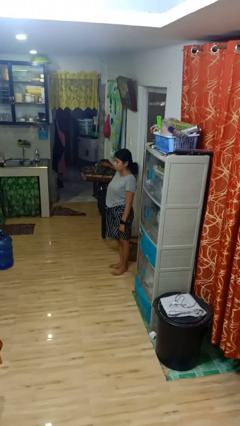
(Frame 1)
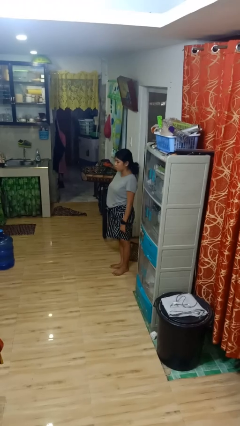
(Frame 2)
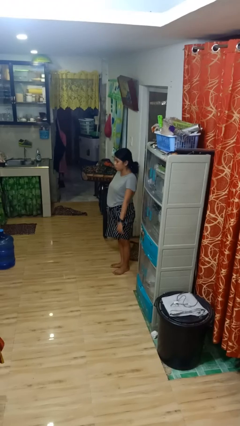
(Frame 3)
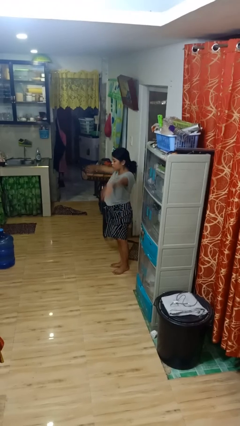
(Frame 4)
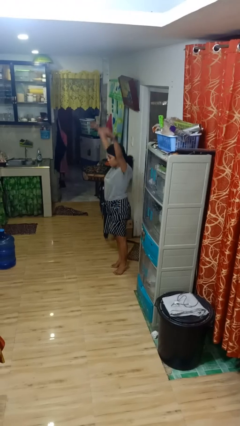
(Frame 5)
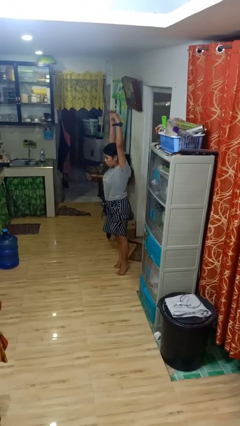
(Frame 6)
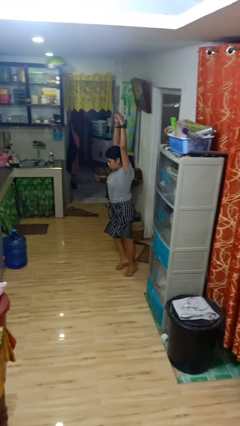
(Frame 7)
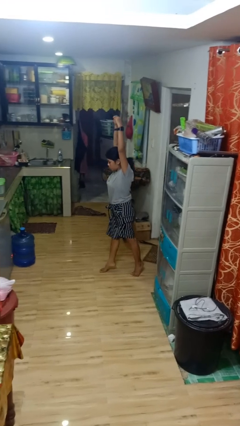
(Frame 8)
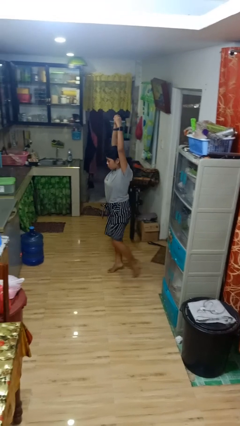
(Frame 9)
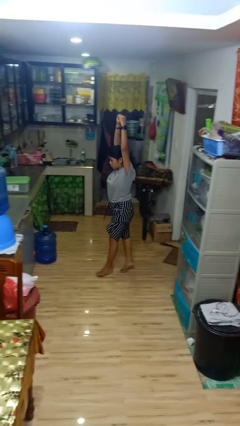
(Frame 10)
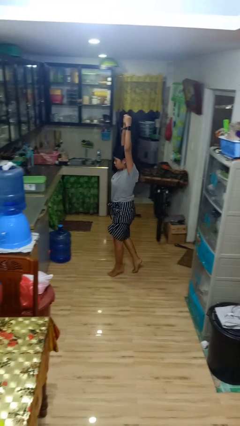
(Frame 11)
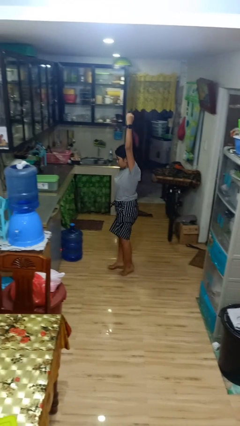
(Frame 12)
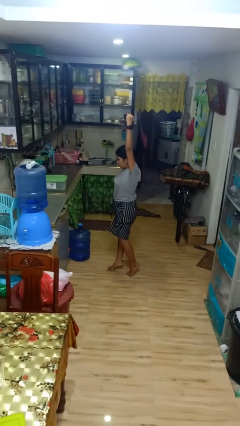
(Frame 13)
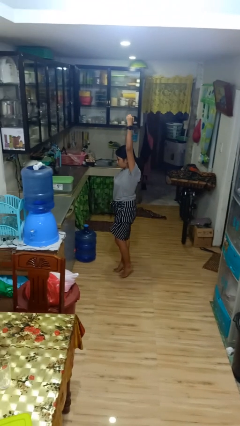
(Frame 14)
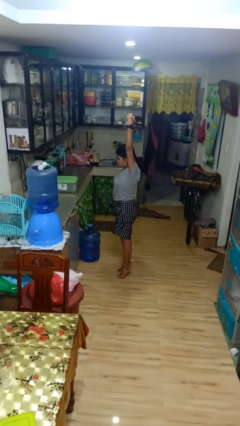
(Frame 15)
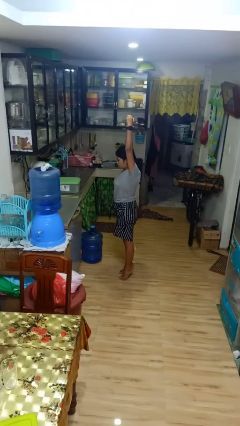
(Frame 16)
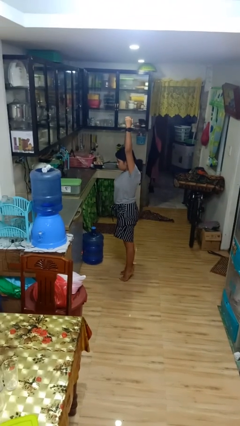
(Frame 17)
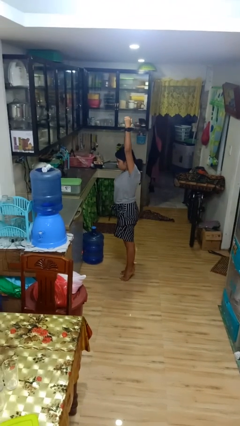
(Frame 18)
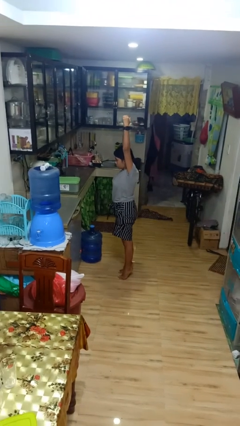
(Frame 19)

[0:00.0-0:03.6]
person walks tiptoe

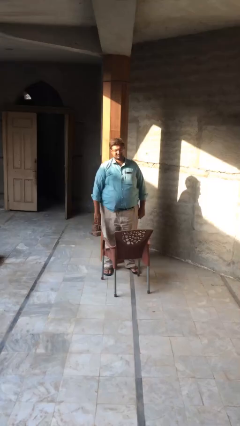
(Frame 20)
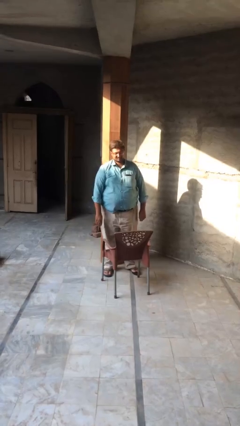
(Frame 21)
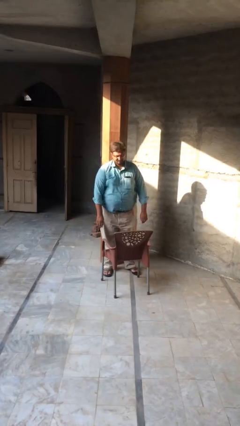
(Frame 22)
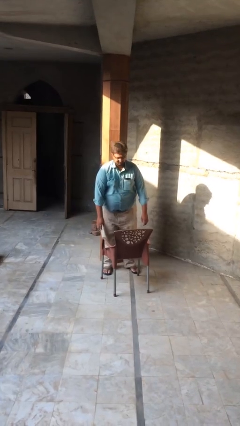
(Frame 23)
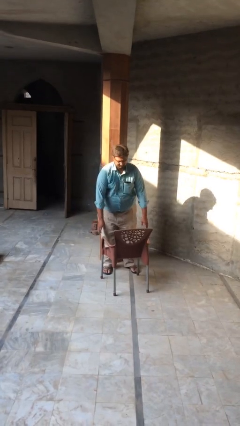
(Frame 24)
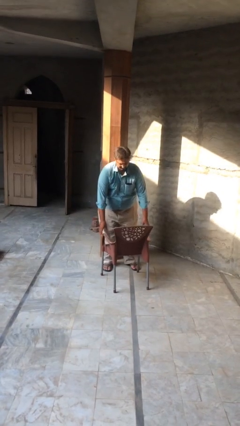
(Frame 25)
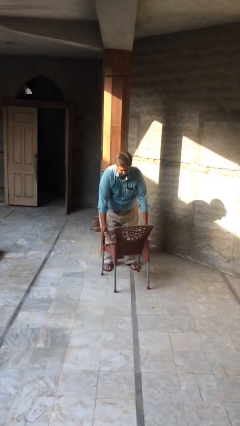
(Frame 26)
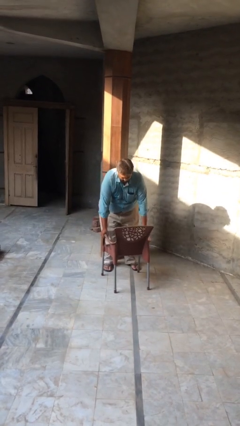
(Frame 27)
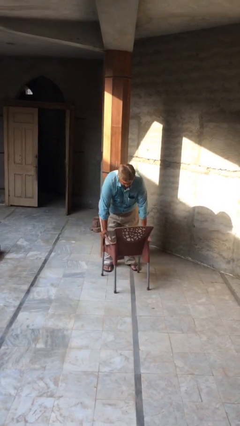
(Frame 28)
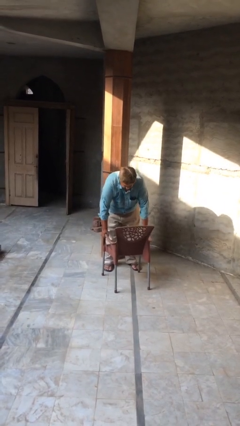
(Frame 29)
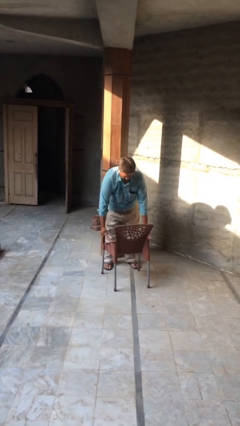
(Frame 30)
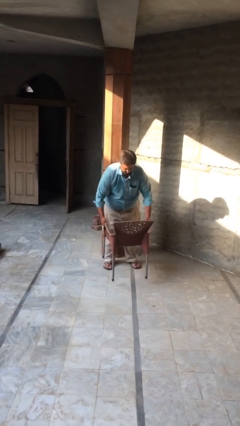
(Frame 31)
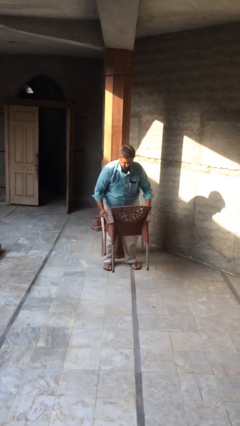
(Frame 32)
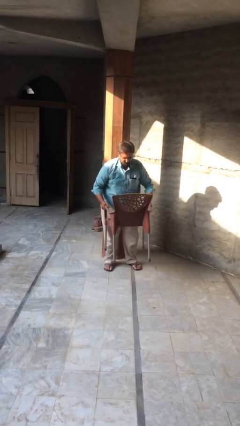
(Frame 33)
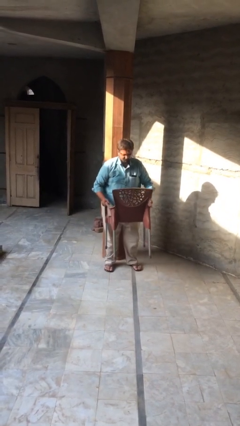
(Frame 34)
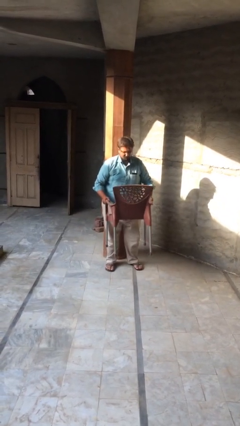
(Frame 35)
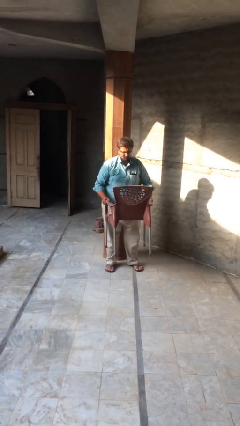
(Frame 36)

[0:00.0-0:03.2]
person picks up object from floor

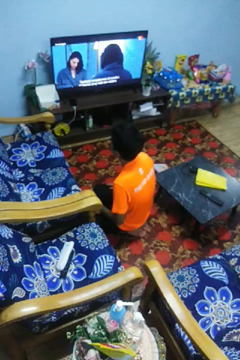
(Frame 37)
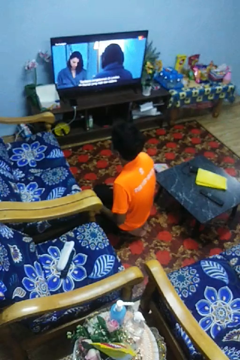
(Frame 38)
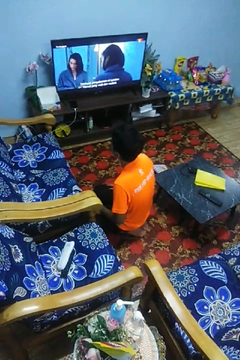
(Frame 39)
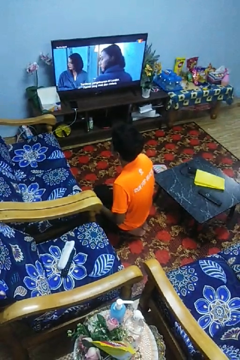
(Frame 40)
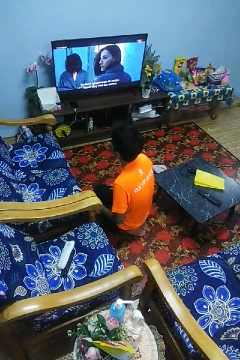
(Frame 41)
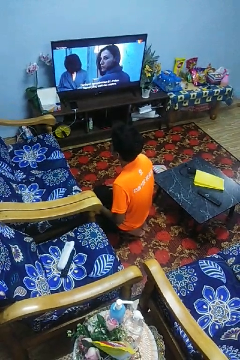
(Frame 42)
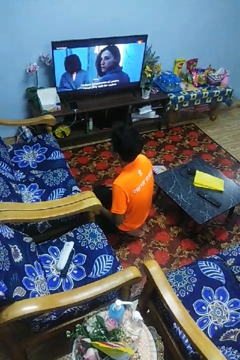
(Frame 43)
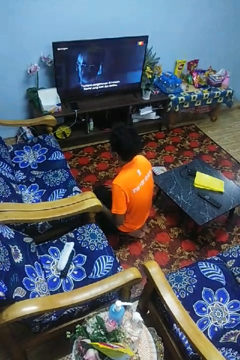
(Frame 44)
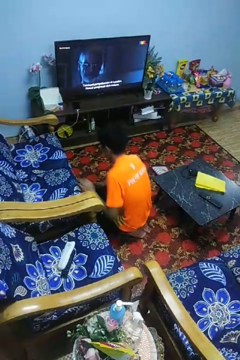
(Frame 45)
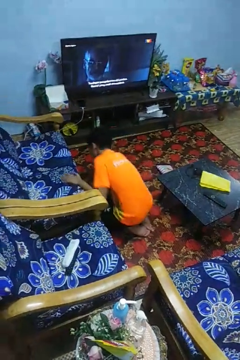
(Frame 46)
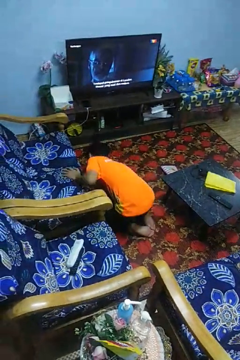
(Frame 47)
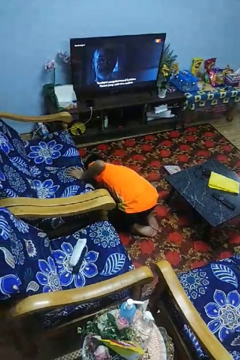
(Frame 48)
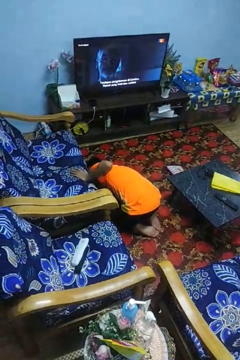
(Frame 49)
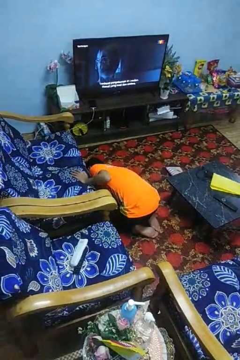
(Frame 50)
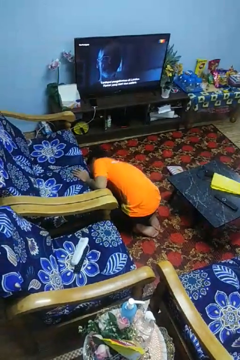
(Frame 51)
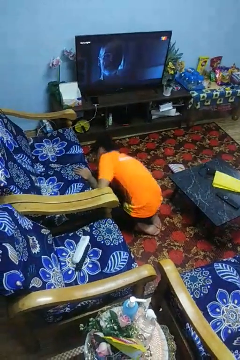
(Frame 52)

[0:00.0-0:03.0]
person searches under couch

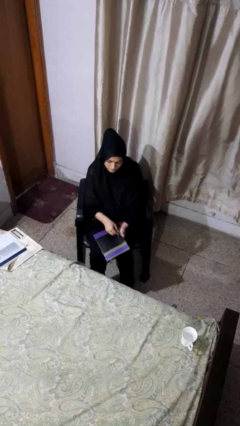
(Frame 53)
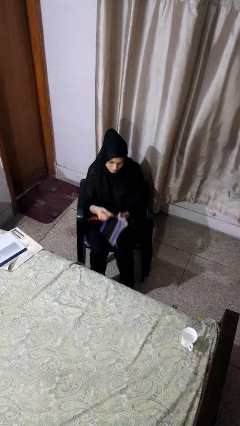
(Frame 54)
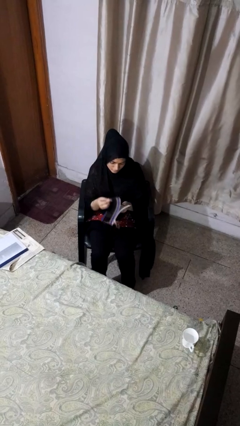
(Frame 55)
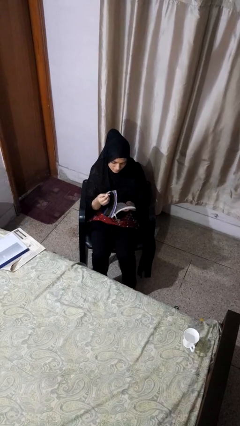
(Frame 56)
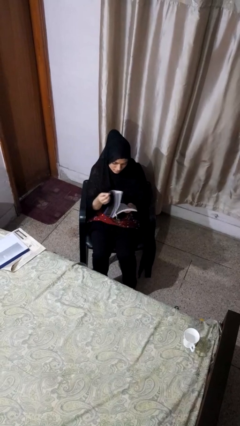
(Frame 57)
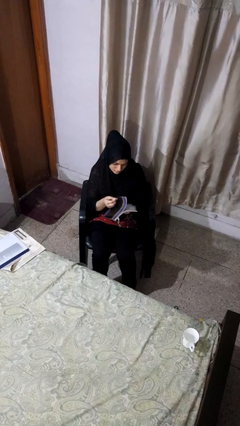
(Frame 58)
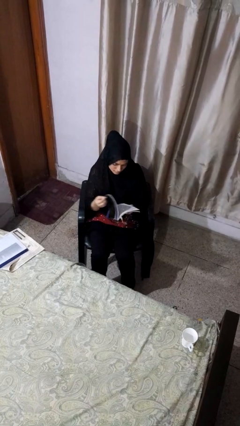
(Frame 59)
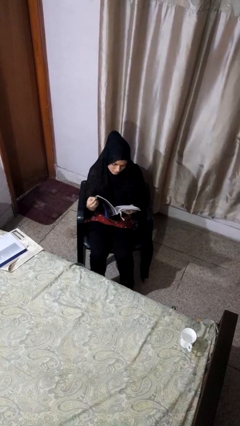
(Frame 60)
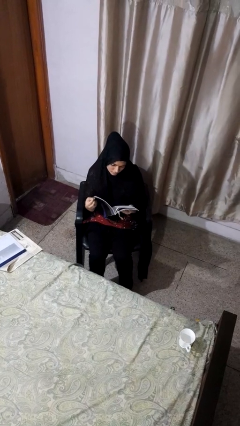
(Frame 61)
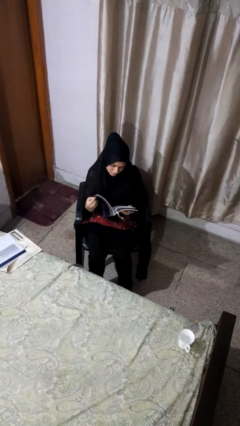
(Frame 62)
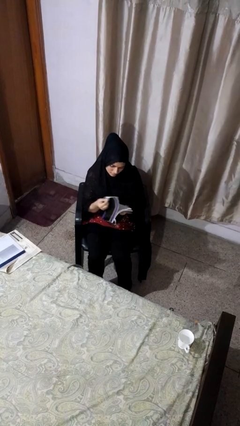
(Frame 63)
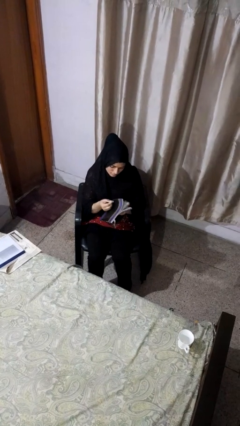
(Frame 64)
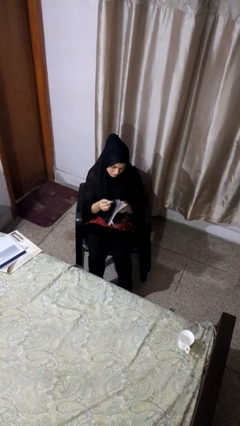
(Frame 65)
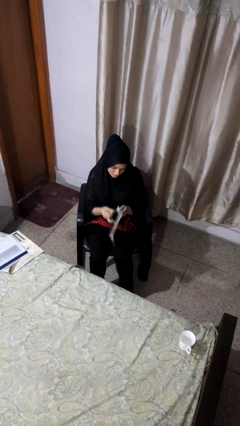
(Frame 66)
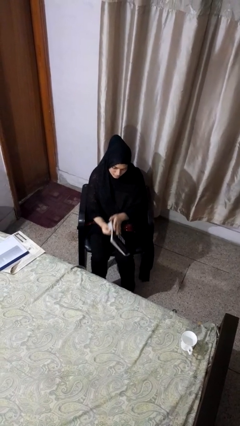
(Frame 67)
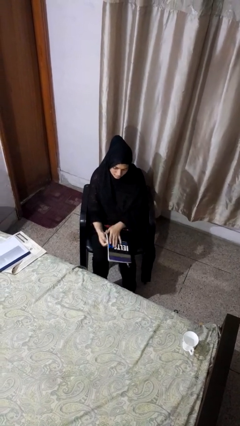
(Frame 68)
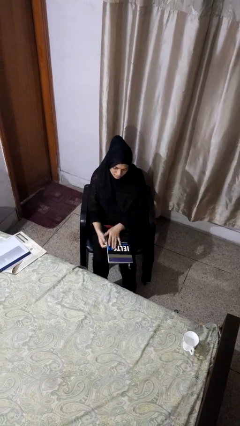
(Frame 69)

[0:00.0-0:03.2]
person reads book

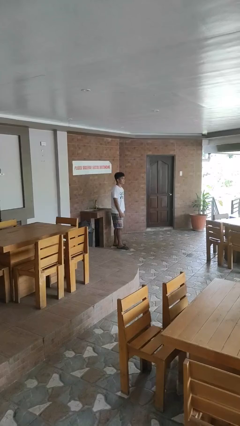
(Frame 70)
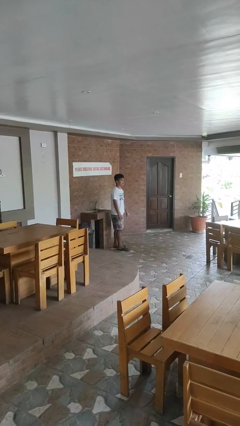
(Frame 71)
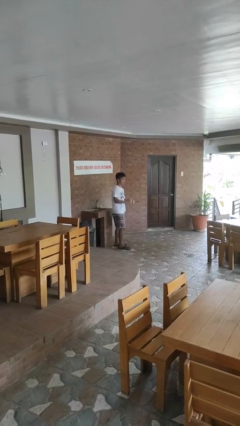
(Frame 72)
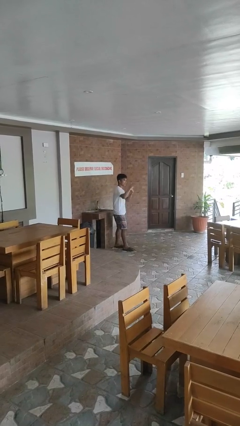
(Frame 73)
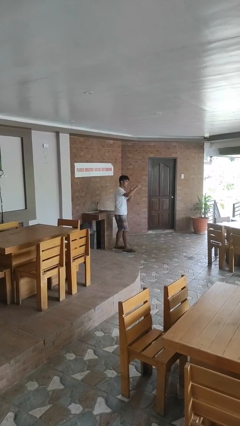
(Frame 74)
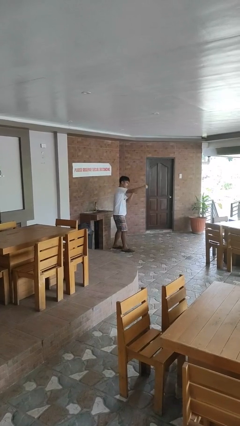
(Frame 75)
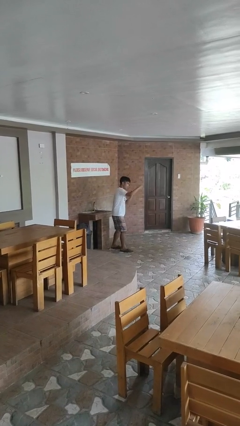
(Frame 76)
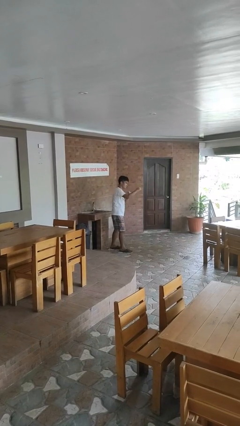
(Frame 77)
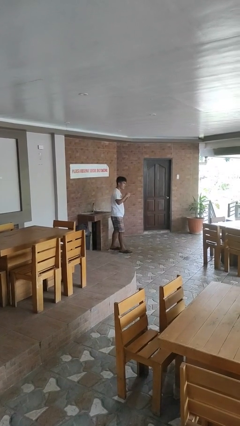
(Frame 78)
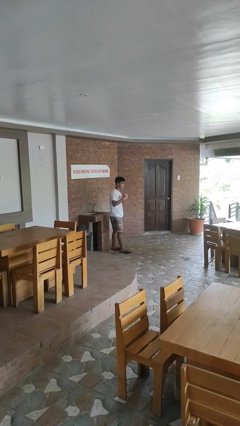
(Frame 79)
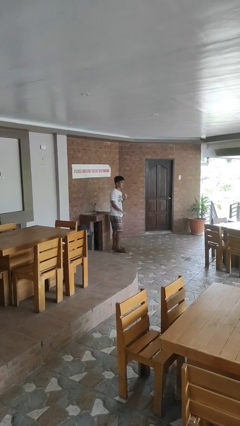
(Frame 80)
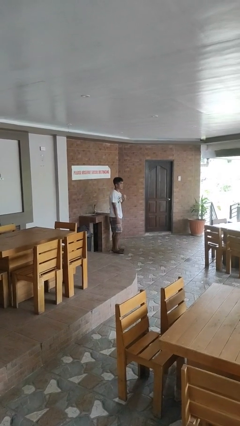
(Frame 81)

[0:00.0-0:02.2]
person punches

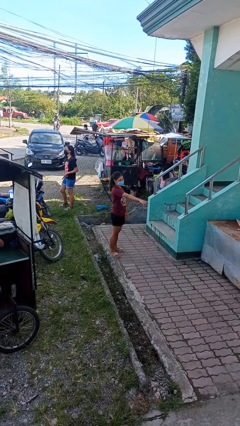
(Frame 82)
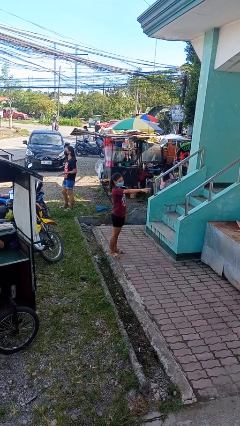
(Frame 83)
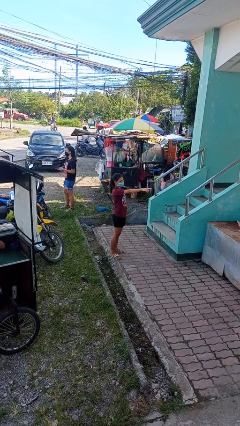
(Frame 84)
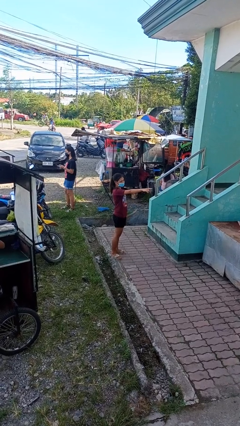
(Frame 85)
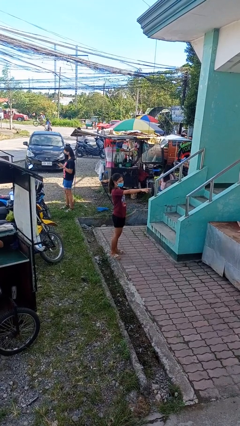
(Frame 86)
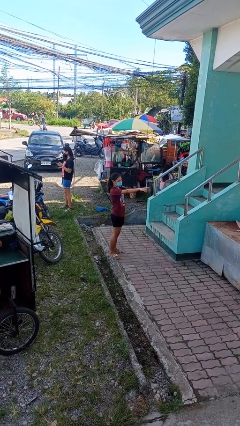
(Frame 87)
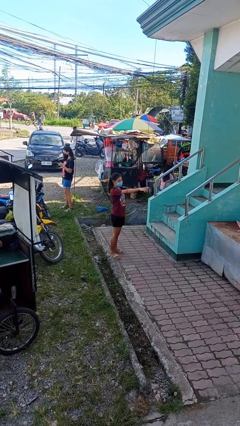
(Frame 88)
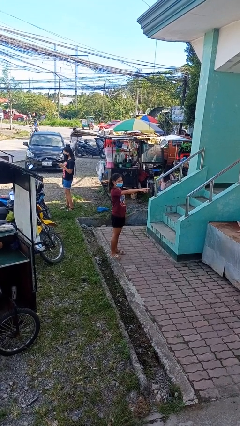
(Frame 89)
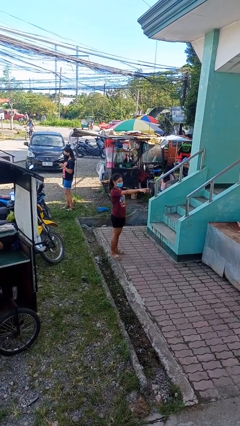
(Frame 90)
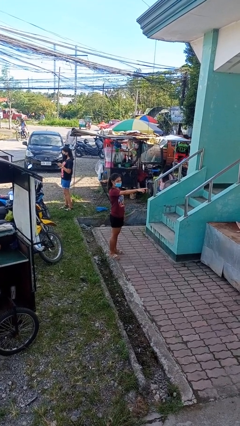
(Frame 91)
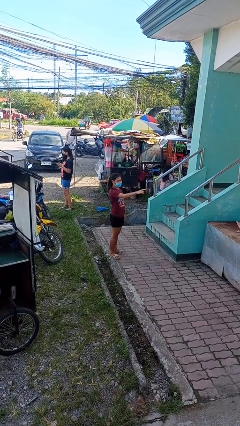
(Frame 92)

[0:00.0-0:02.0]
person points at person

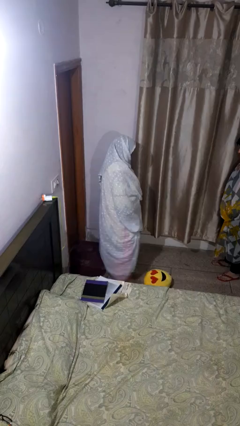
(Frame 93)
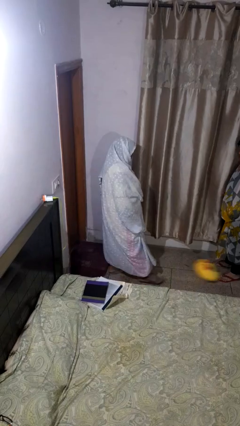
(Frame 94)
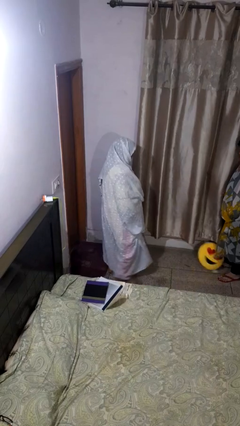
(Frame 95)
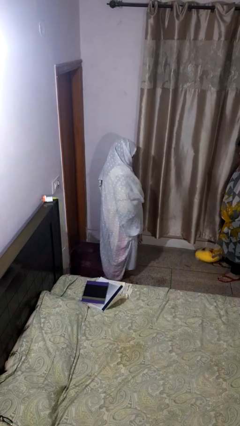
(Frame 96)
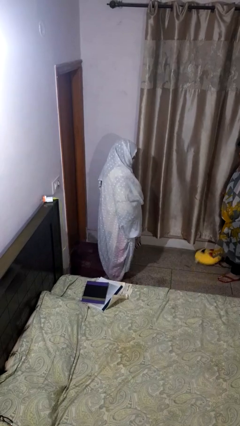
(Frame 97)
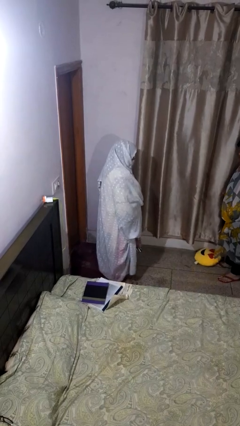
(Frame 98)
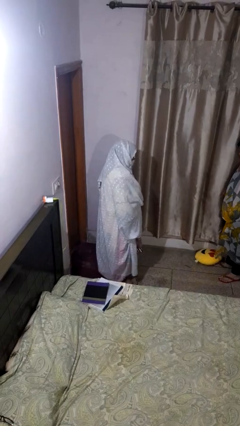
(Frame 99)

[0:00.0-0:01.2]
person kicks object to person
